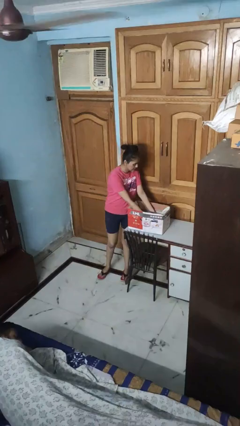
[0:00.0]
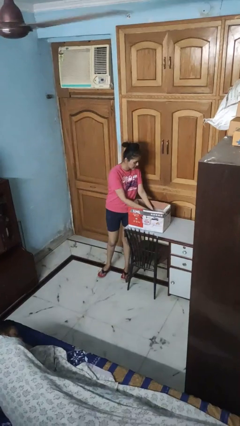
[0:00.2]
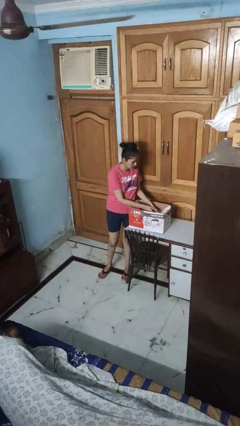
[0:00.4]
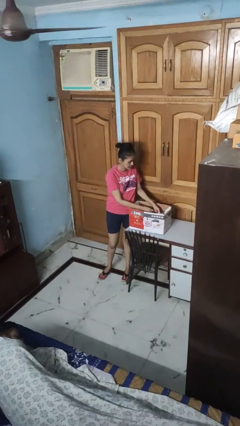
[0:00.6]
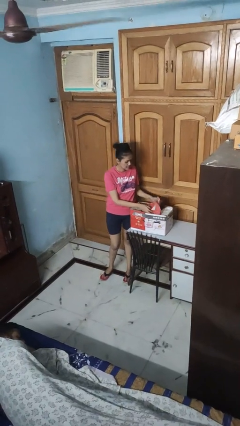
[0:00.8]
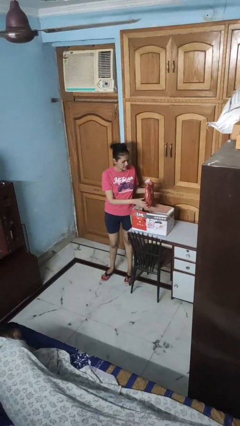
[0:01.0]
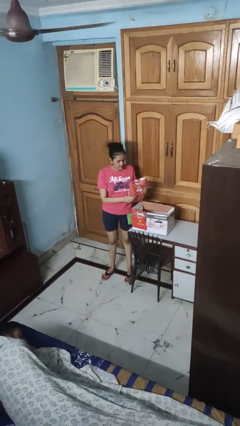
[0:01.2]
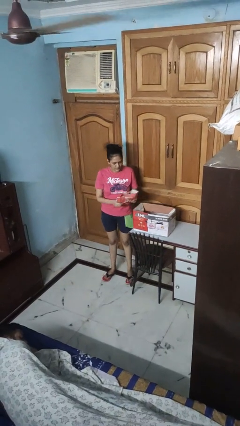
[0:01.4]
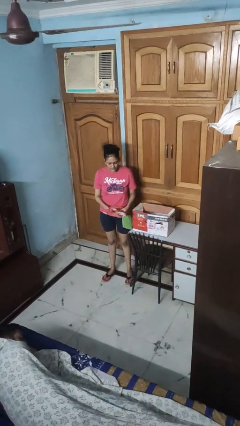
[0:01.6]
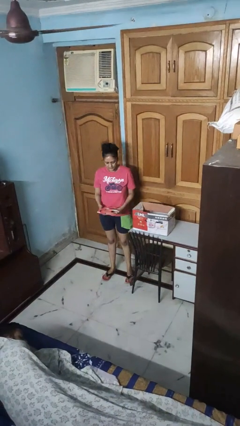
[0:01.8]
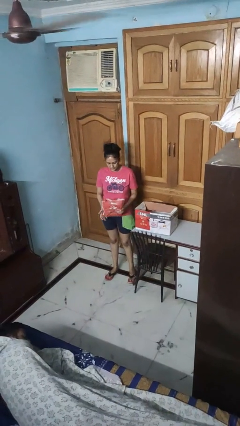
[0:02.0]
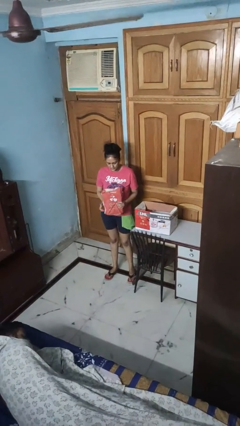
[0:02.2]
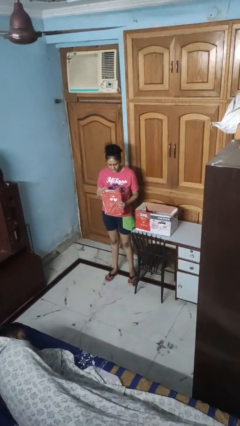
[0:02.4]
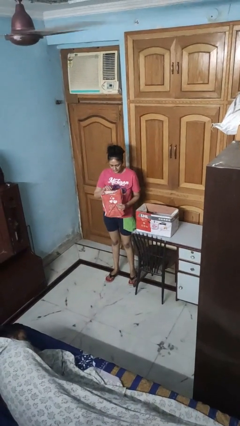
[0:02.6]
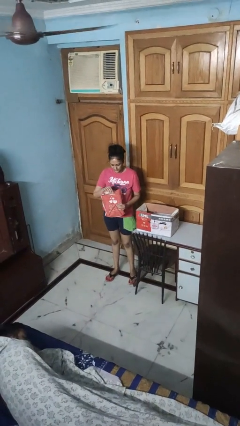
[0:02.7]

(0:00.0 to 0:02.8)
person takes object from box

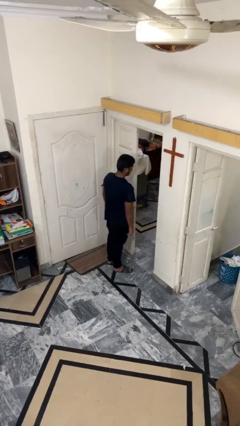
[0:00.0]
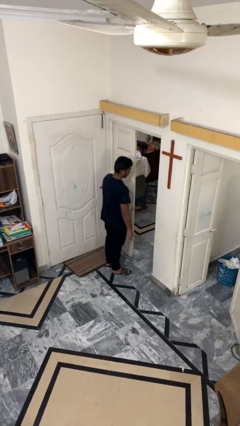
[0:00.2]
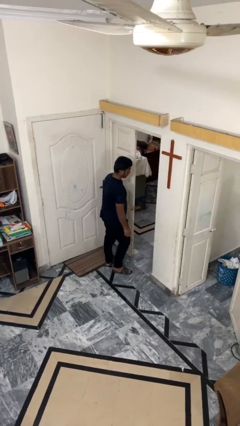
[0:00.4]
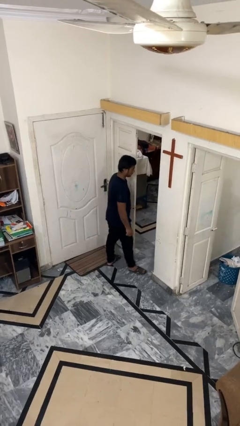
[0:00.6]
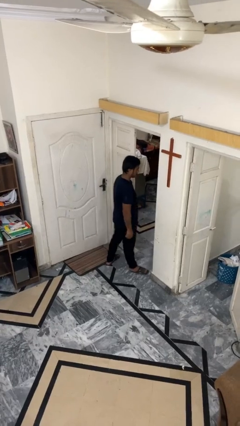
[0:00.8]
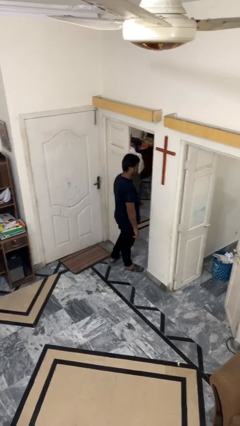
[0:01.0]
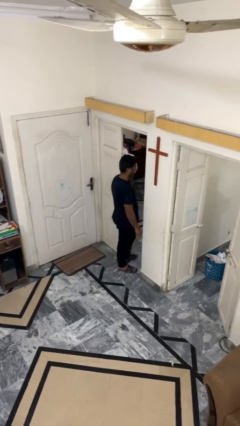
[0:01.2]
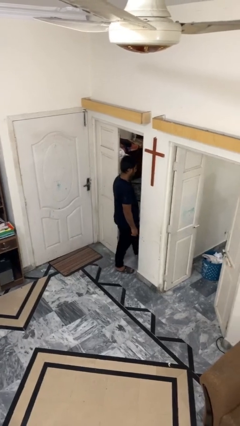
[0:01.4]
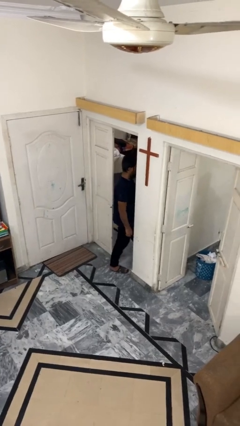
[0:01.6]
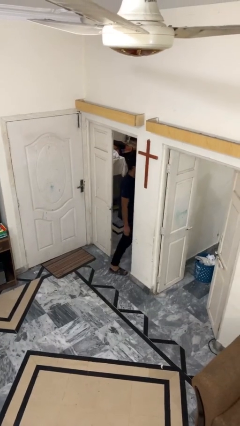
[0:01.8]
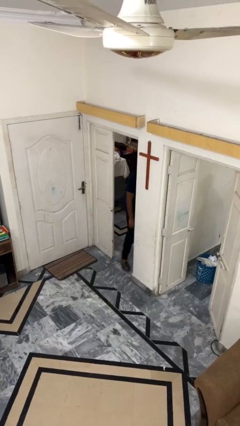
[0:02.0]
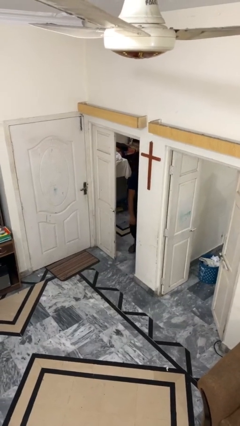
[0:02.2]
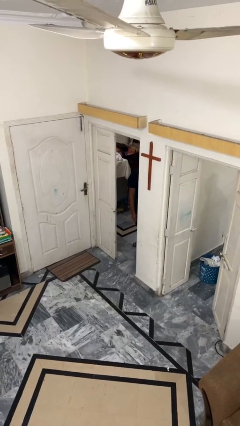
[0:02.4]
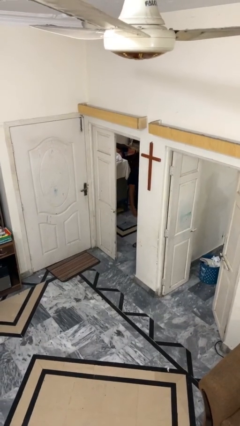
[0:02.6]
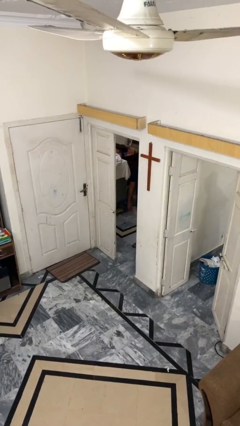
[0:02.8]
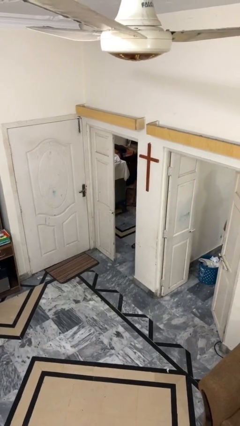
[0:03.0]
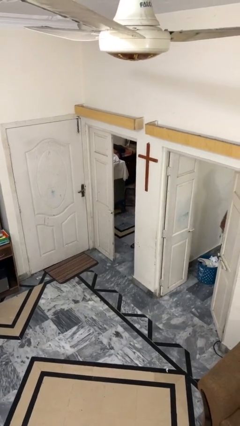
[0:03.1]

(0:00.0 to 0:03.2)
person exits scene through structure

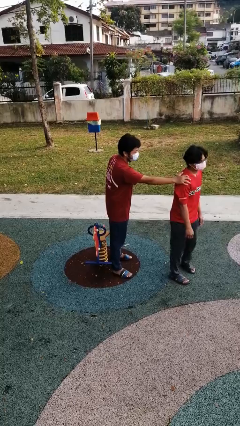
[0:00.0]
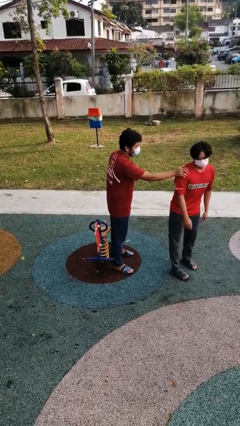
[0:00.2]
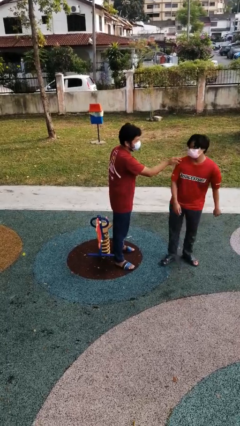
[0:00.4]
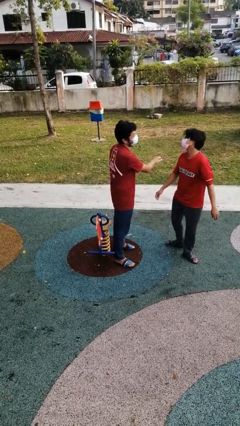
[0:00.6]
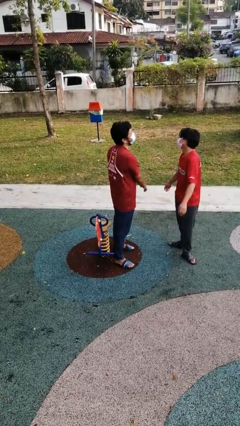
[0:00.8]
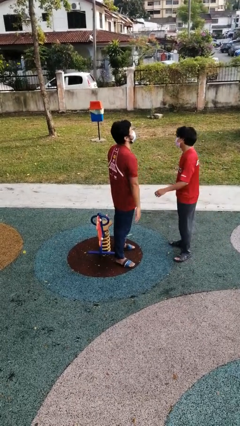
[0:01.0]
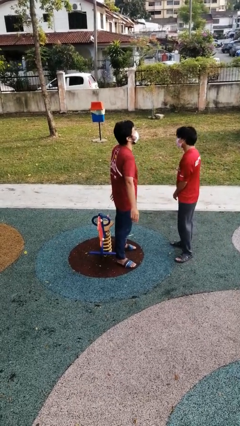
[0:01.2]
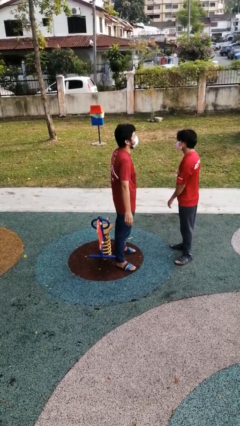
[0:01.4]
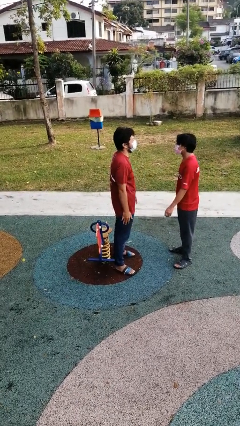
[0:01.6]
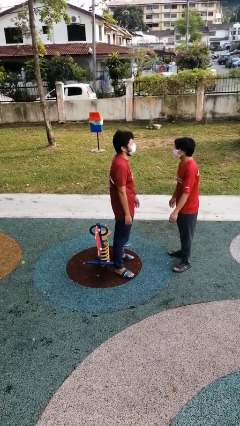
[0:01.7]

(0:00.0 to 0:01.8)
person spins person around

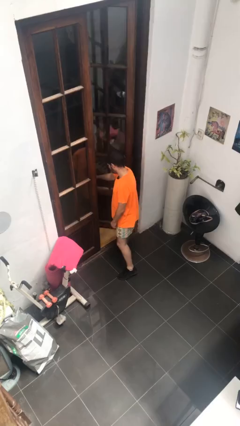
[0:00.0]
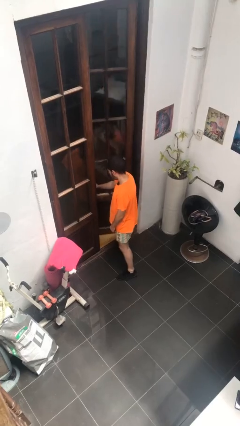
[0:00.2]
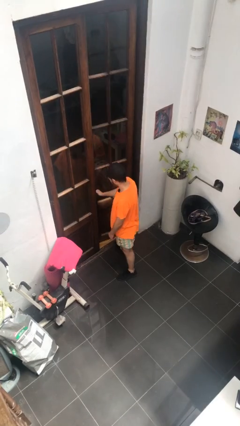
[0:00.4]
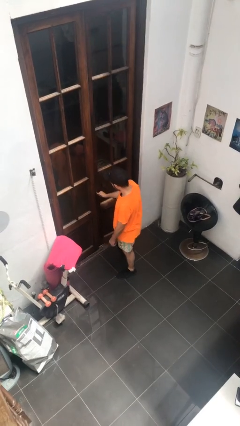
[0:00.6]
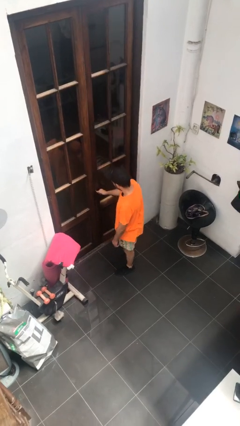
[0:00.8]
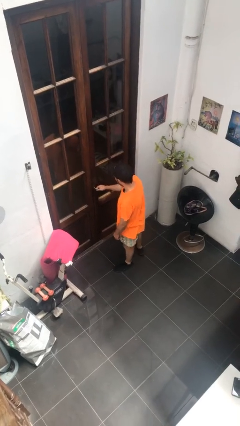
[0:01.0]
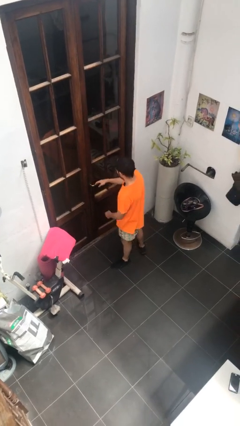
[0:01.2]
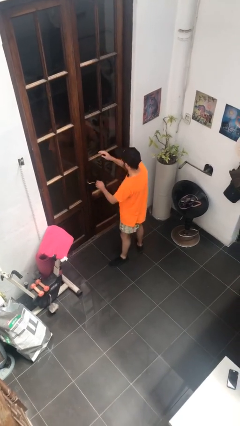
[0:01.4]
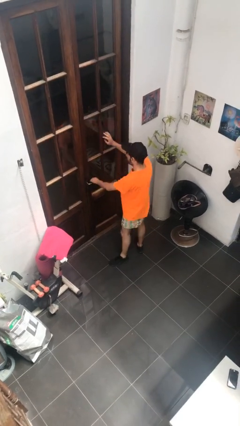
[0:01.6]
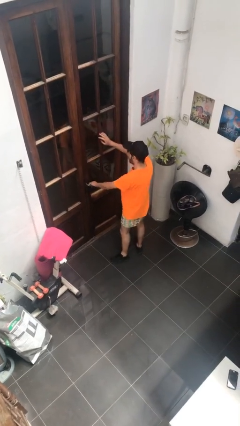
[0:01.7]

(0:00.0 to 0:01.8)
person closes facility door

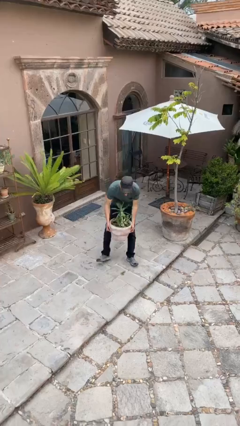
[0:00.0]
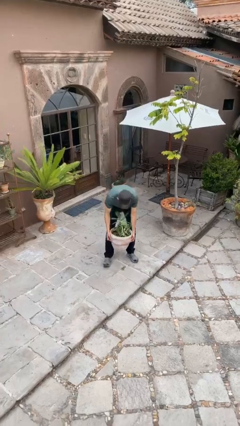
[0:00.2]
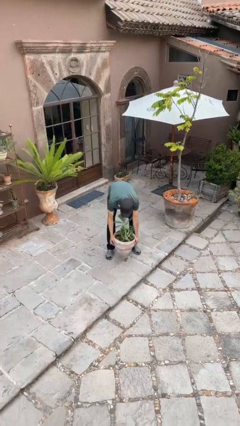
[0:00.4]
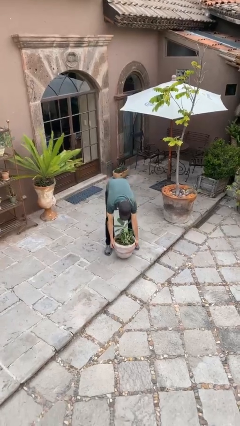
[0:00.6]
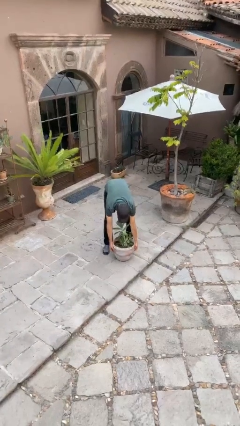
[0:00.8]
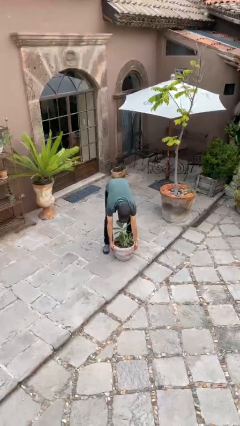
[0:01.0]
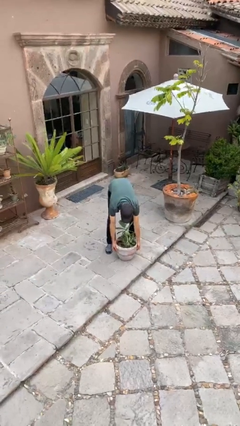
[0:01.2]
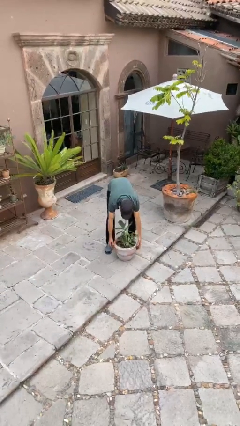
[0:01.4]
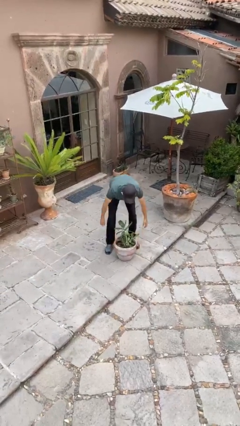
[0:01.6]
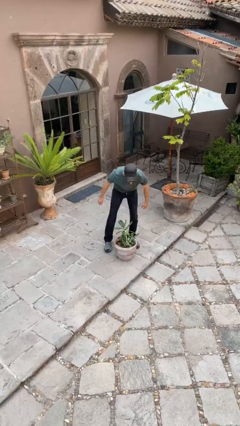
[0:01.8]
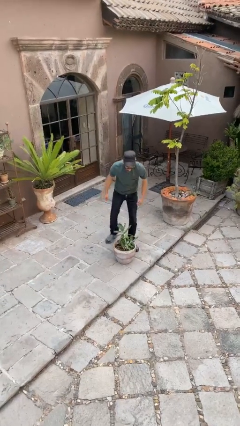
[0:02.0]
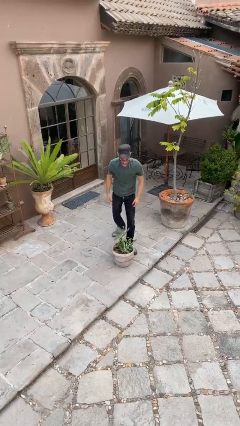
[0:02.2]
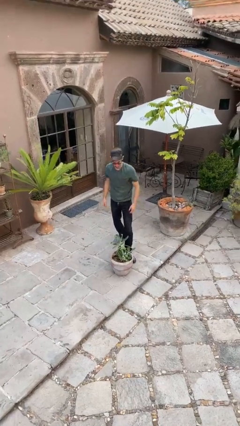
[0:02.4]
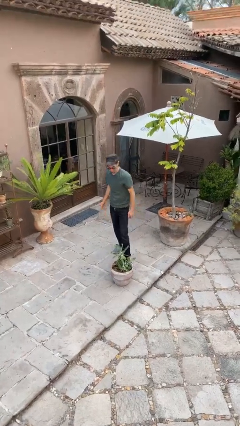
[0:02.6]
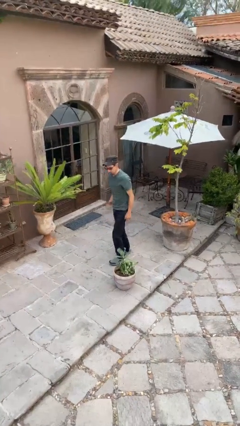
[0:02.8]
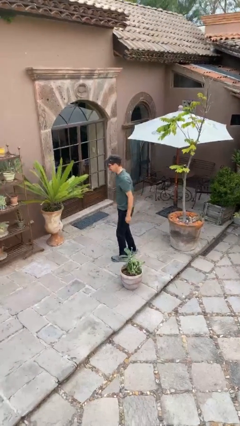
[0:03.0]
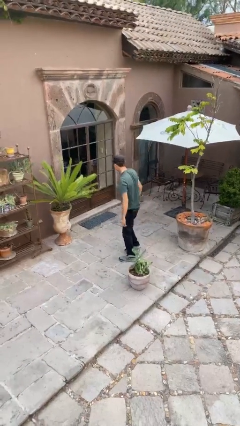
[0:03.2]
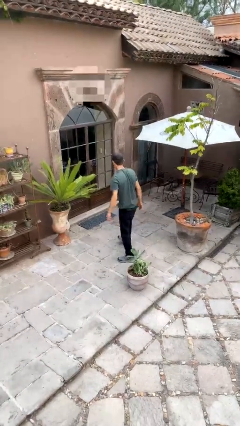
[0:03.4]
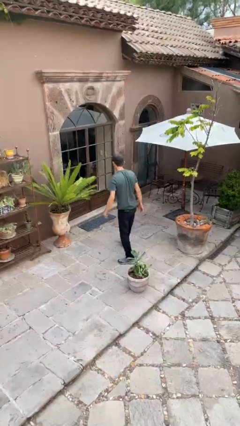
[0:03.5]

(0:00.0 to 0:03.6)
person puts down object on floor

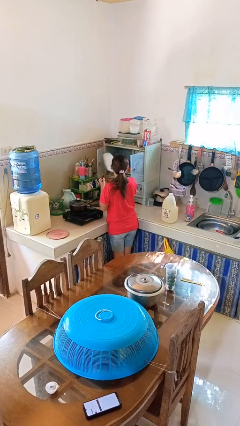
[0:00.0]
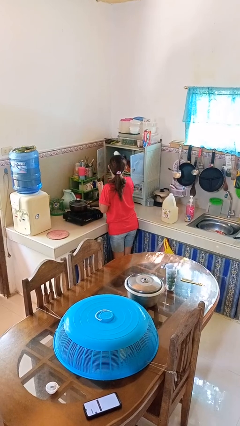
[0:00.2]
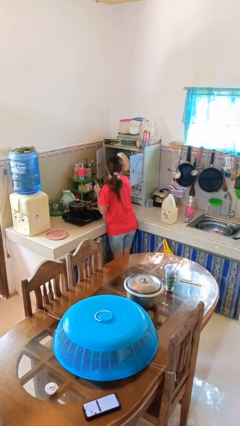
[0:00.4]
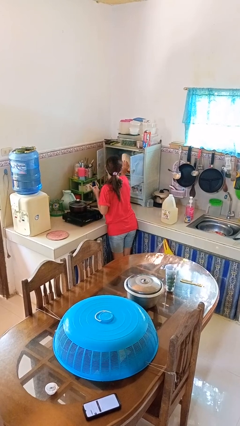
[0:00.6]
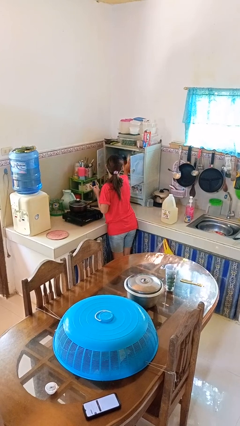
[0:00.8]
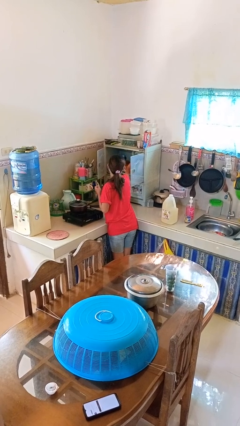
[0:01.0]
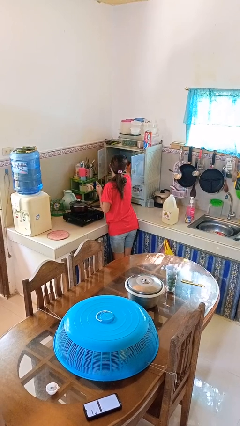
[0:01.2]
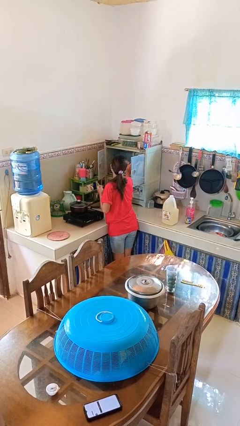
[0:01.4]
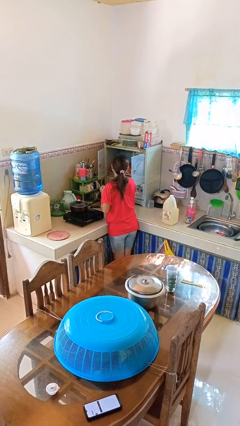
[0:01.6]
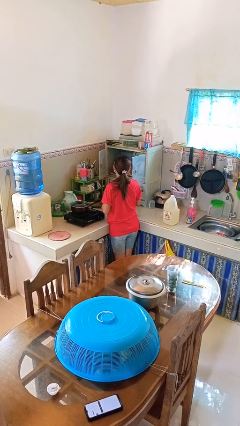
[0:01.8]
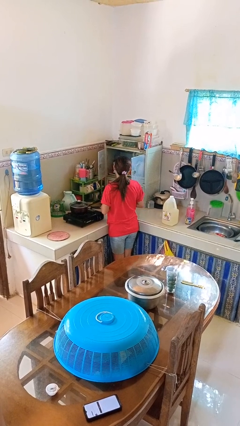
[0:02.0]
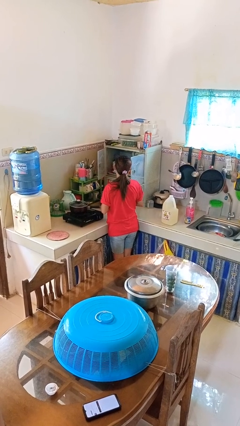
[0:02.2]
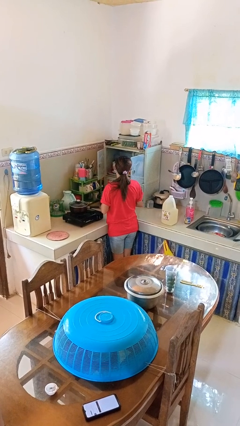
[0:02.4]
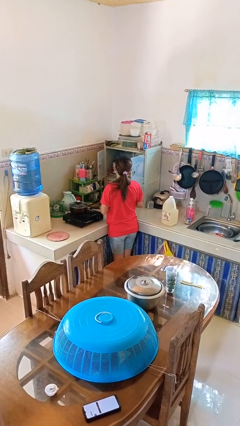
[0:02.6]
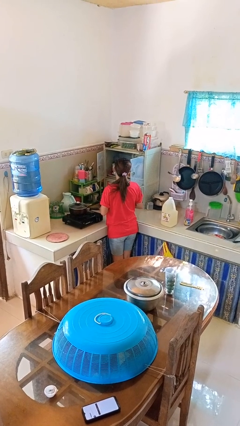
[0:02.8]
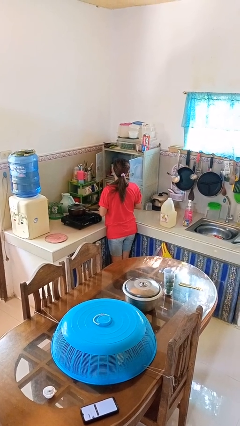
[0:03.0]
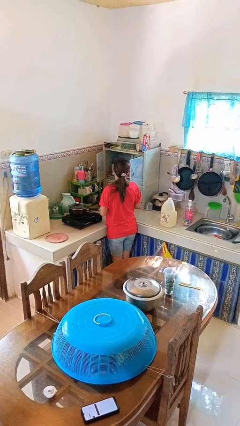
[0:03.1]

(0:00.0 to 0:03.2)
person puts object in cabinet

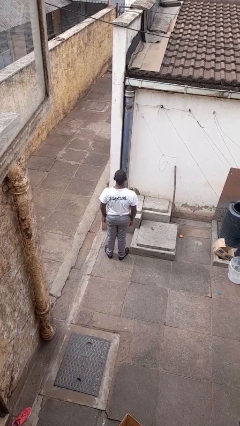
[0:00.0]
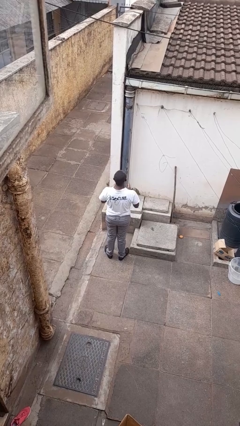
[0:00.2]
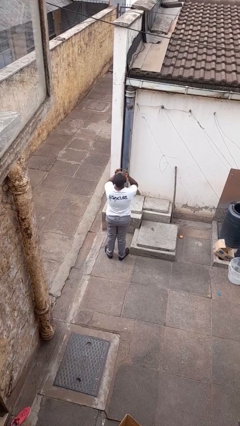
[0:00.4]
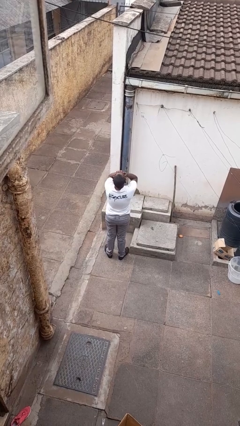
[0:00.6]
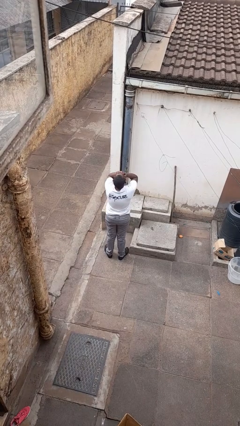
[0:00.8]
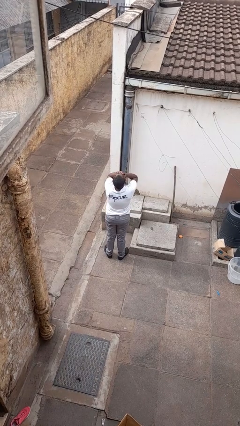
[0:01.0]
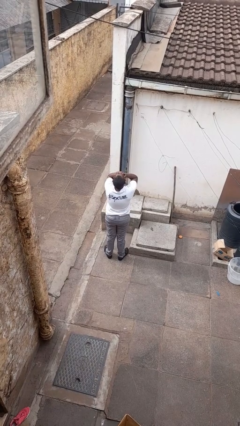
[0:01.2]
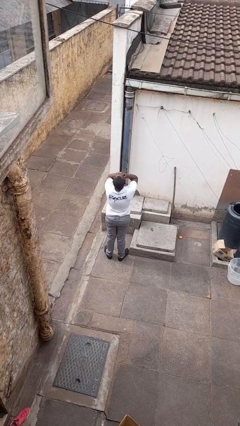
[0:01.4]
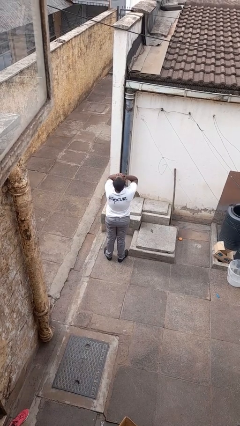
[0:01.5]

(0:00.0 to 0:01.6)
person covers face with hands
